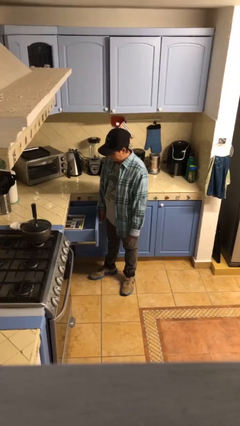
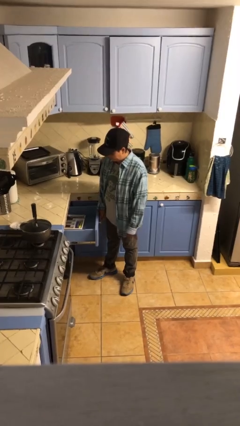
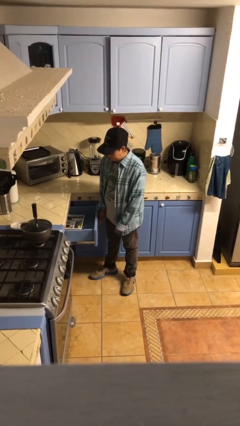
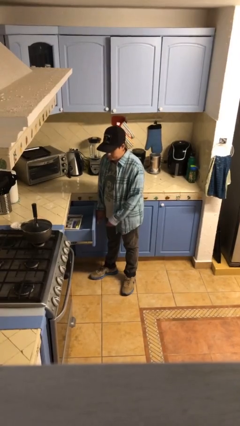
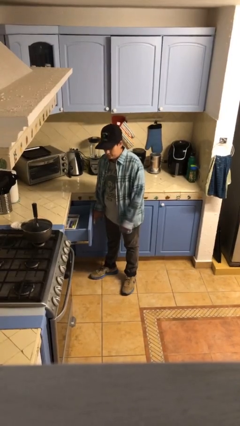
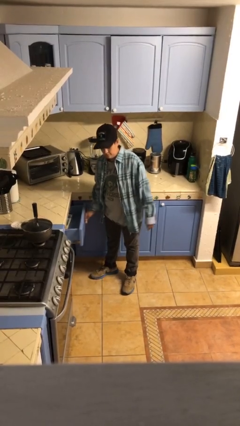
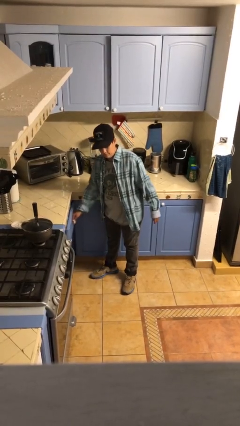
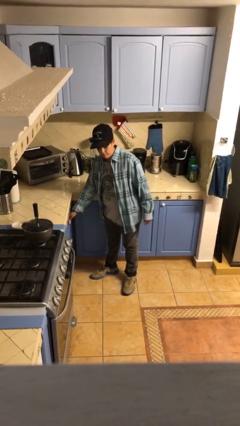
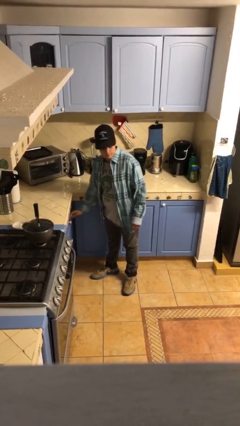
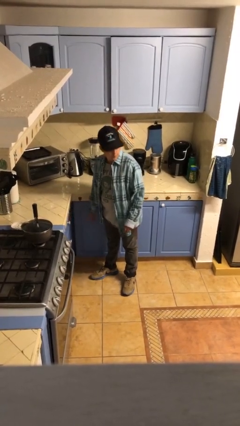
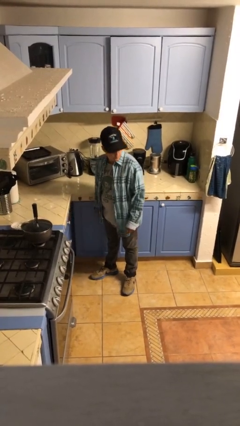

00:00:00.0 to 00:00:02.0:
person closes kitchen drawer

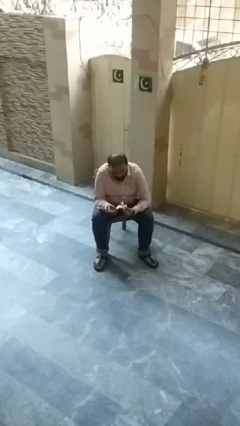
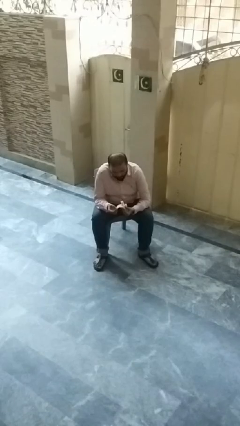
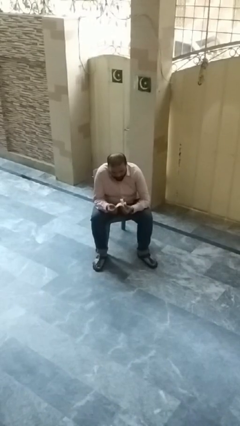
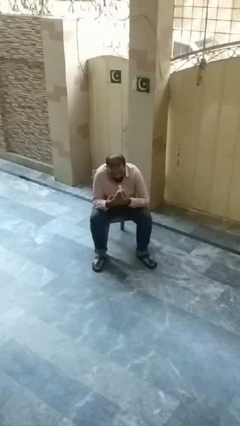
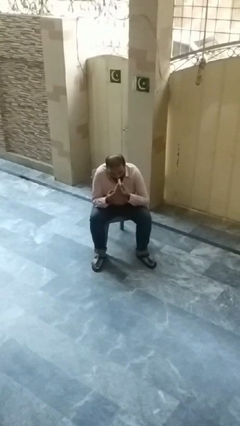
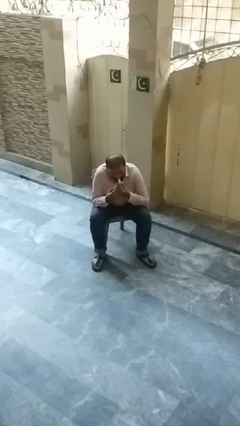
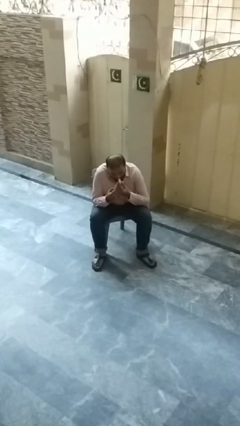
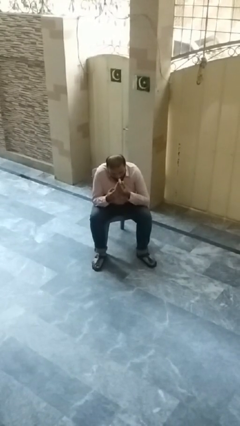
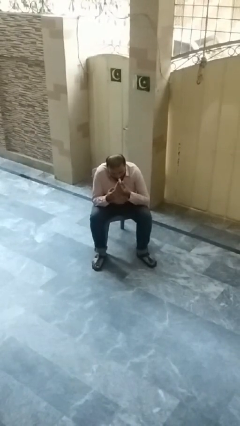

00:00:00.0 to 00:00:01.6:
person eats banana

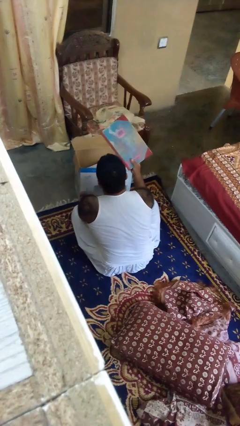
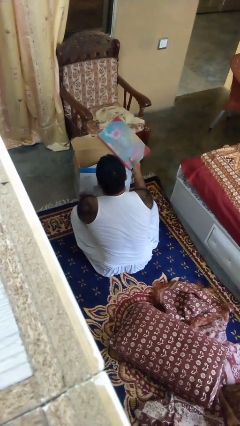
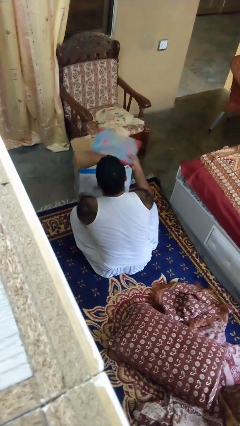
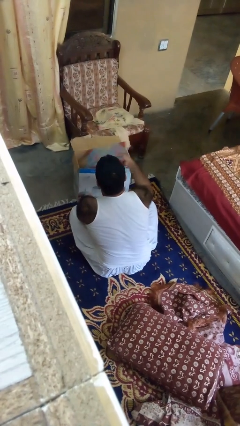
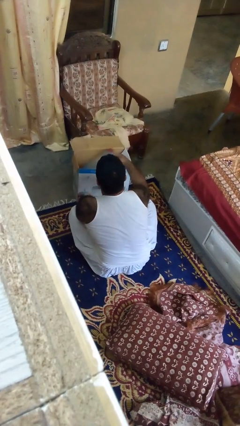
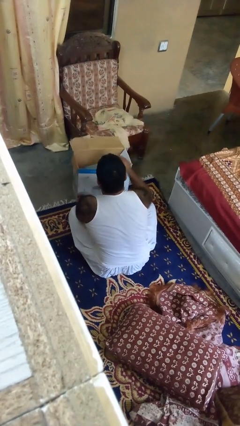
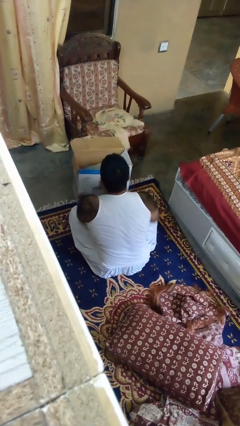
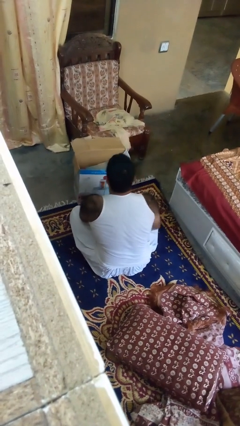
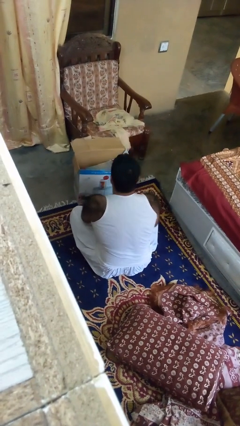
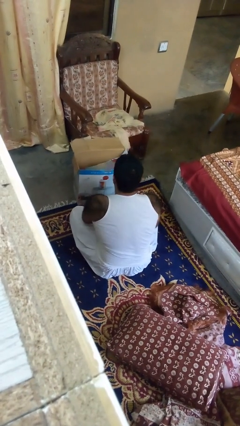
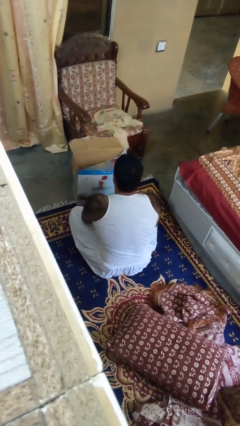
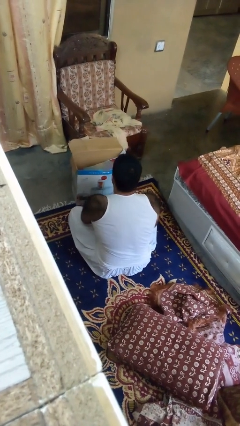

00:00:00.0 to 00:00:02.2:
person puts object into box

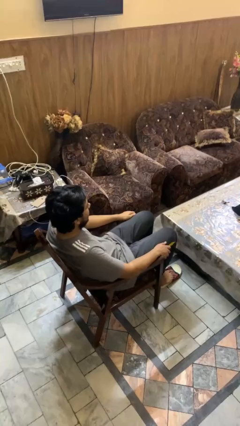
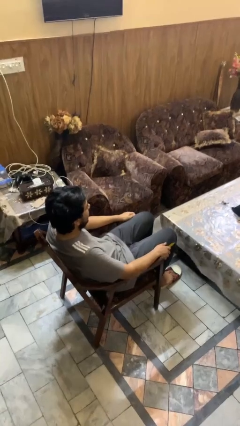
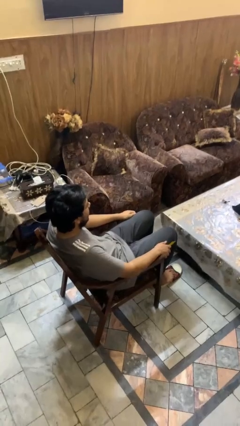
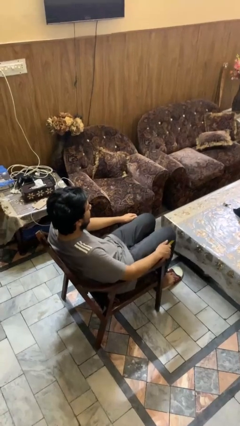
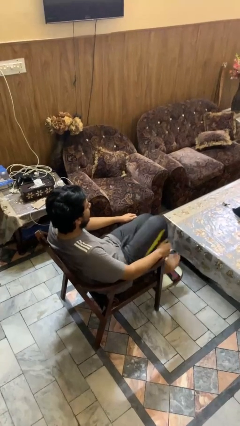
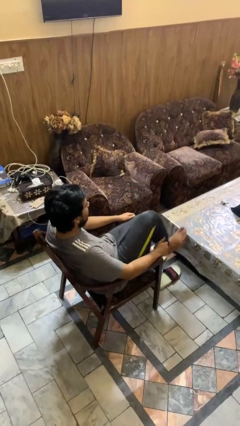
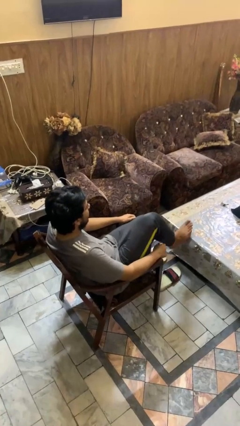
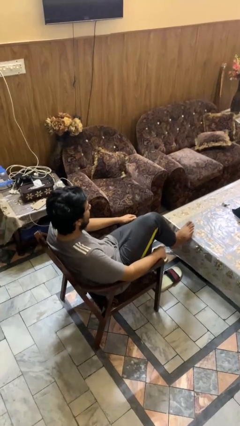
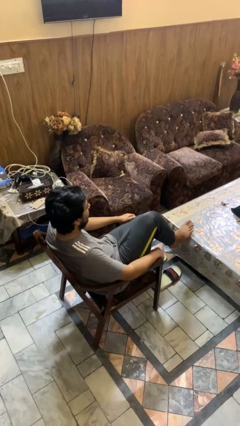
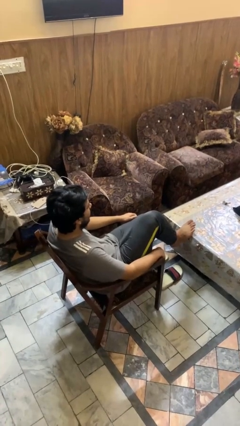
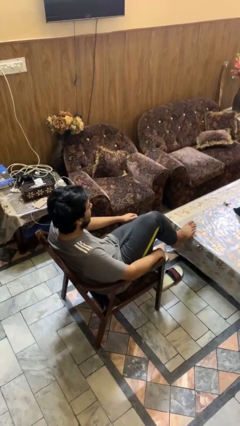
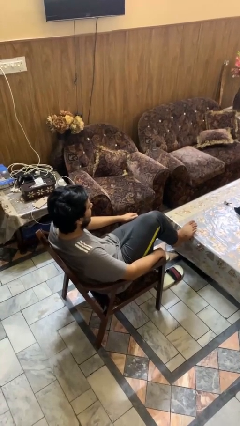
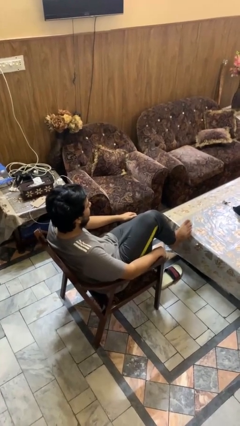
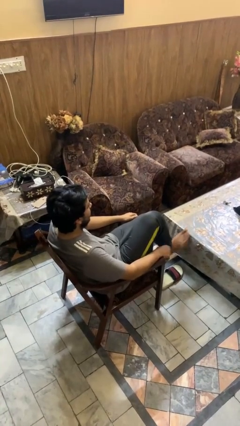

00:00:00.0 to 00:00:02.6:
person puts feet up

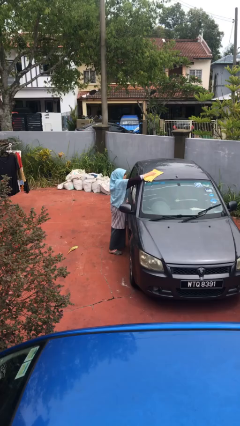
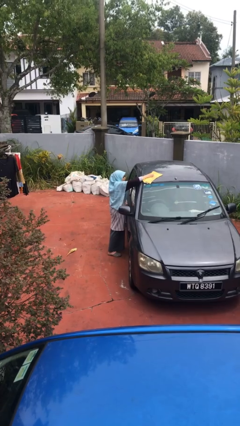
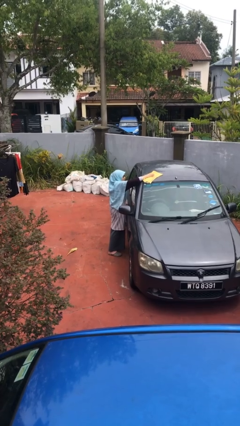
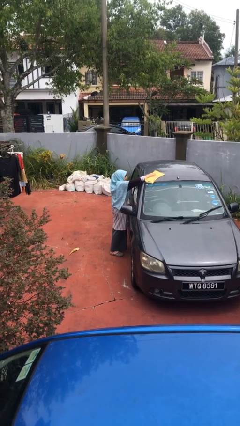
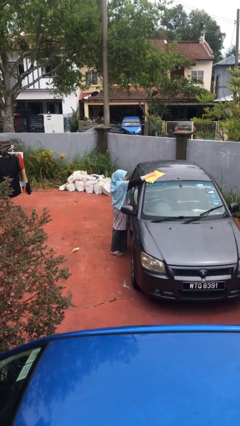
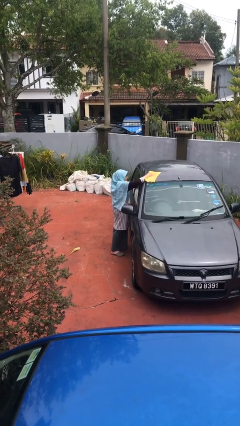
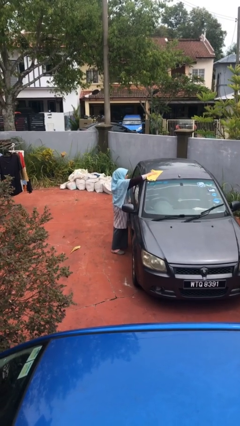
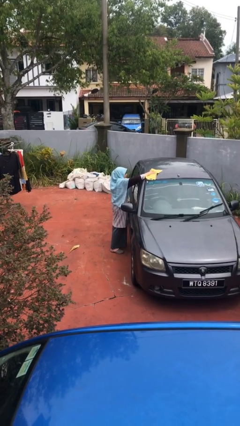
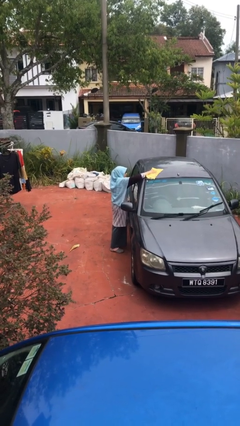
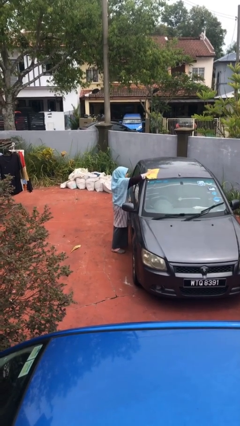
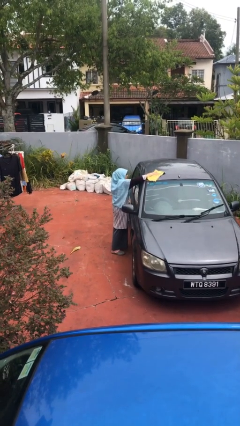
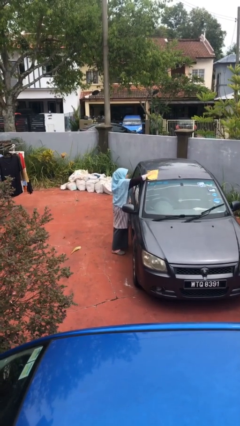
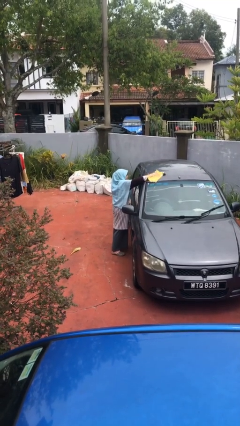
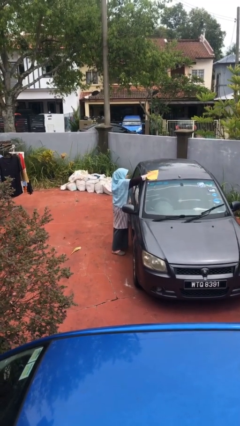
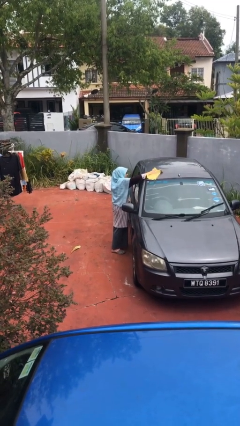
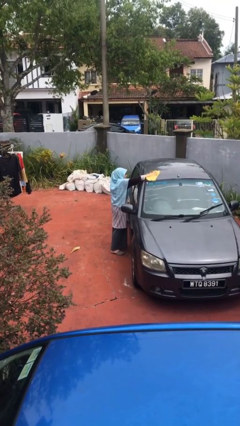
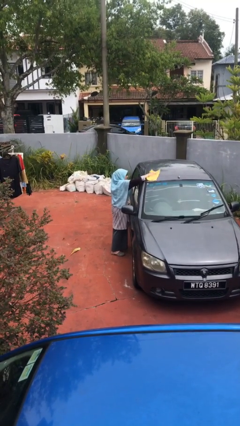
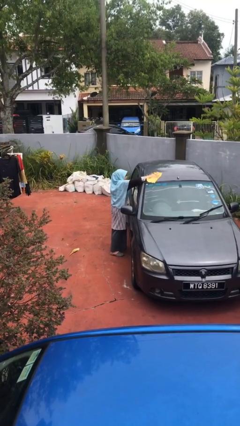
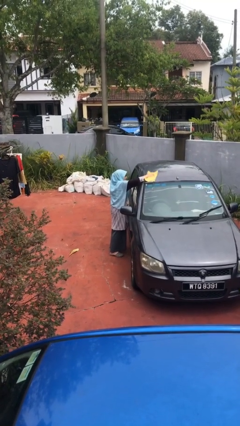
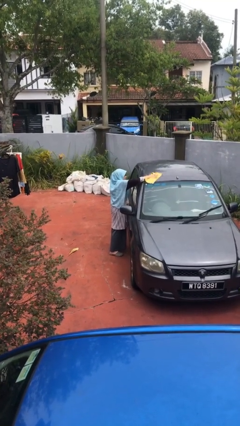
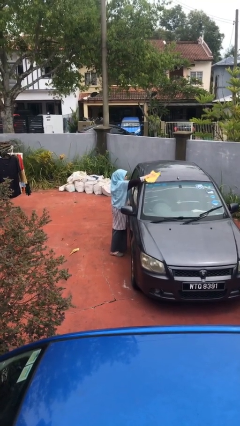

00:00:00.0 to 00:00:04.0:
person polishes car with rag

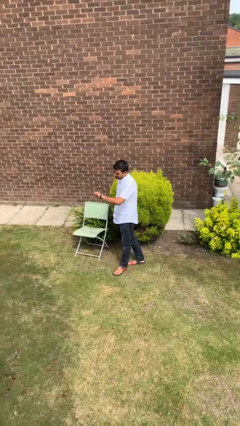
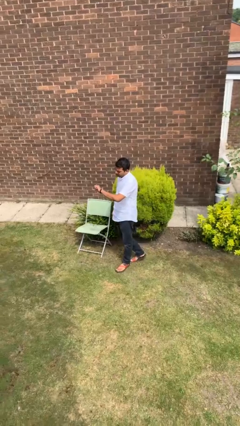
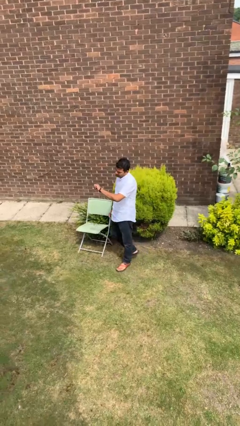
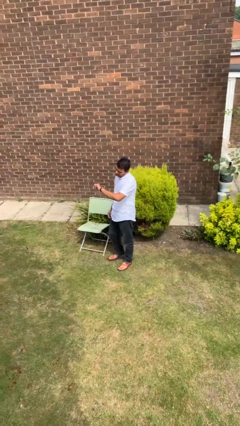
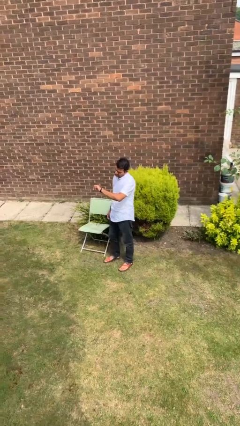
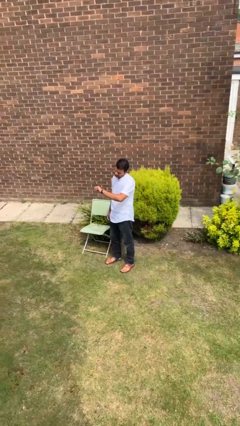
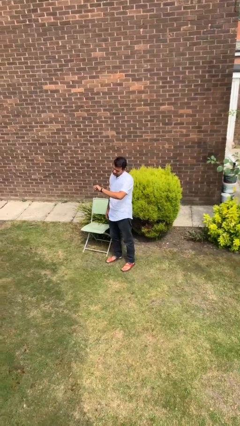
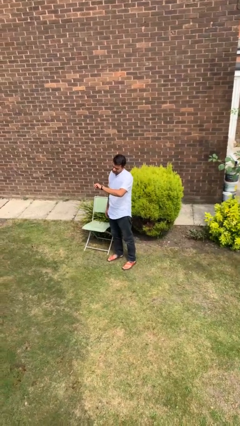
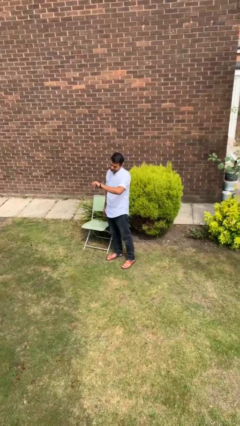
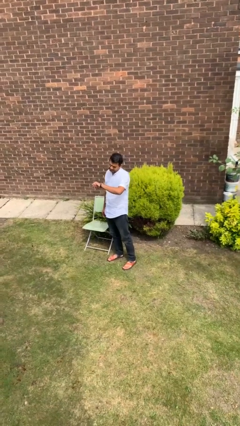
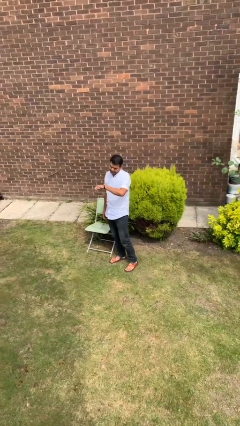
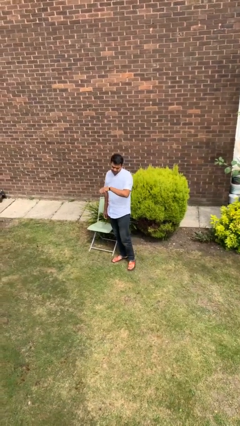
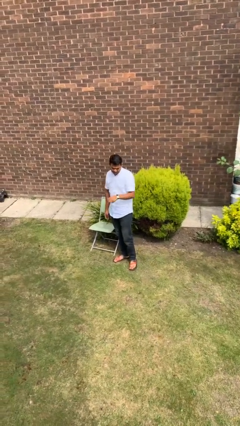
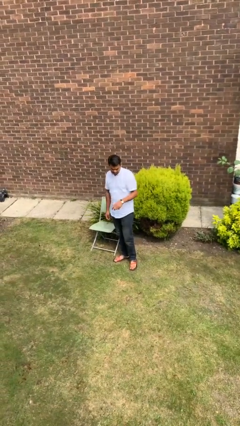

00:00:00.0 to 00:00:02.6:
person looks at wristwatch

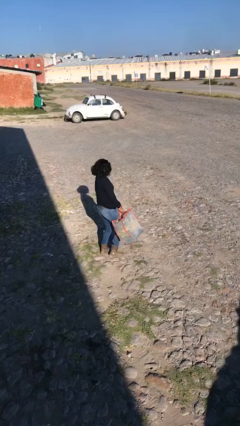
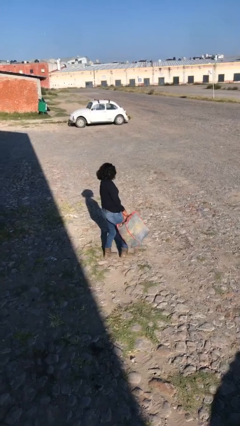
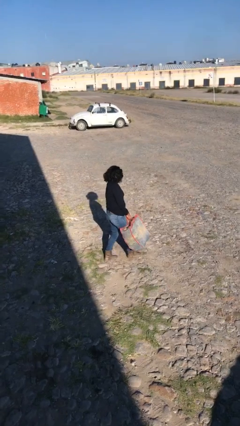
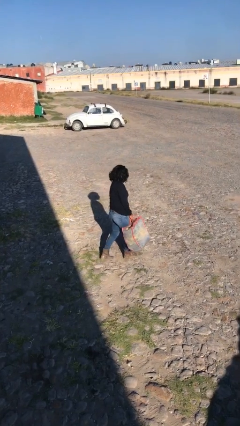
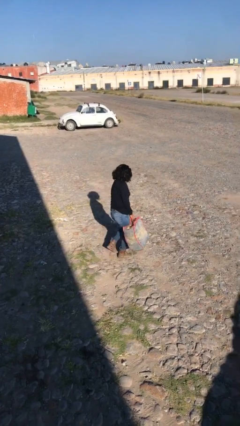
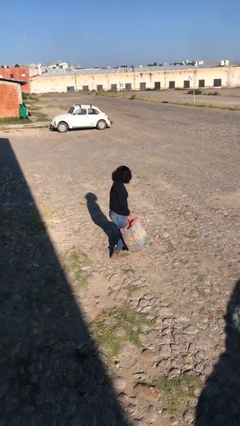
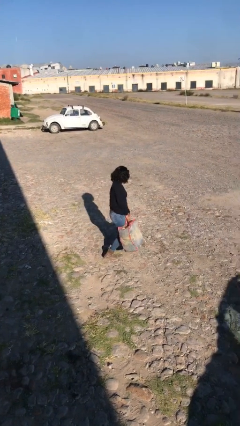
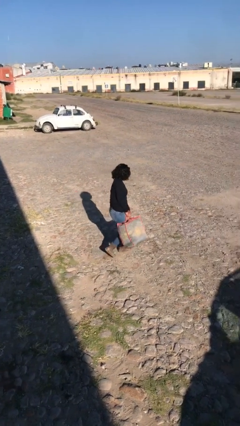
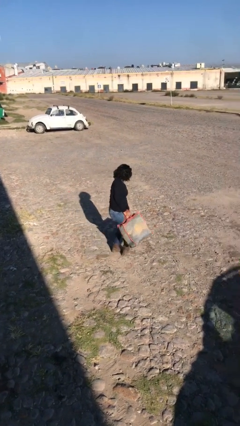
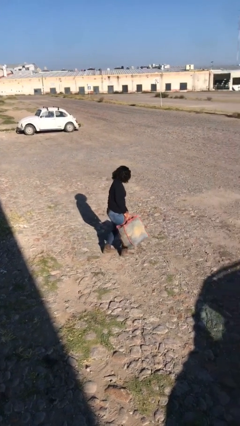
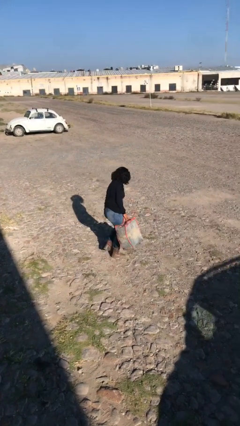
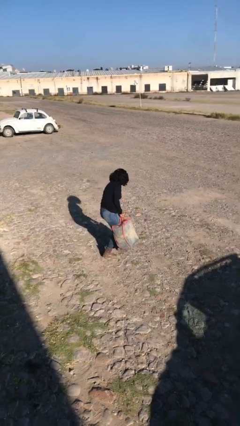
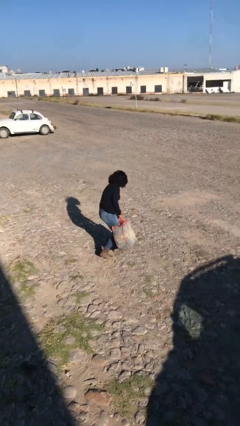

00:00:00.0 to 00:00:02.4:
person carries heavy object
